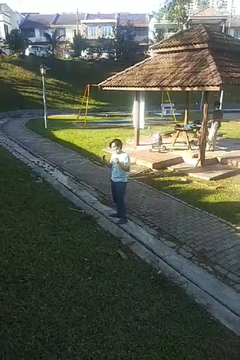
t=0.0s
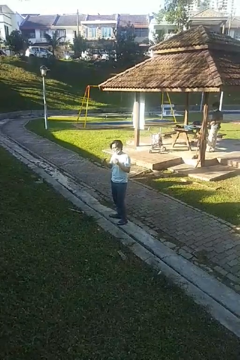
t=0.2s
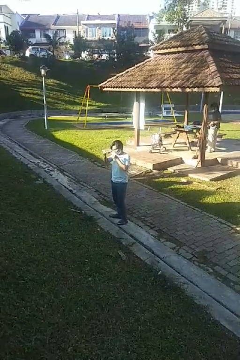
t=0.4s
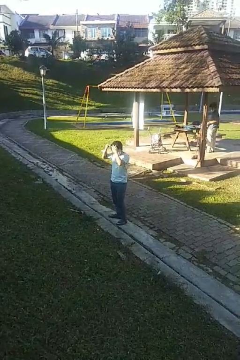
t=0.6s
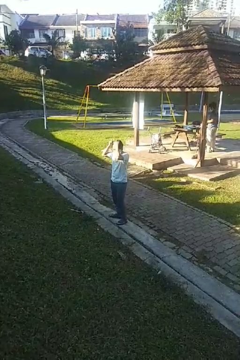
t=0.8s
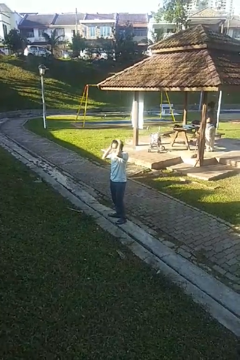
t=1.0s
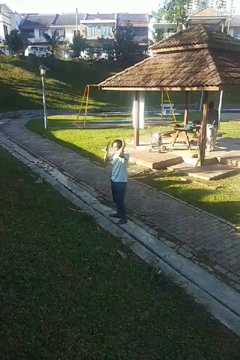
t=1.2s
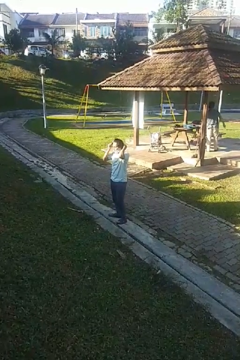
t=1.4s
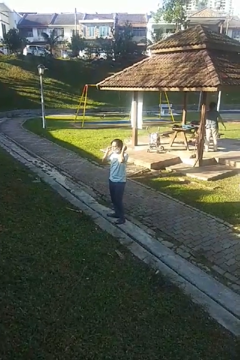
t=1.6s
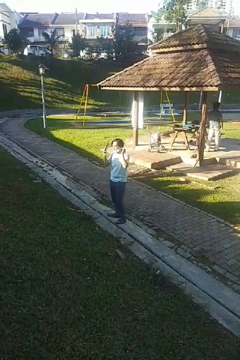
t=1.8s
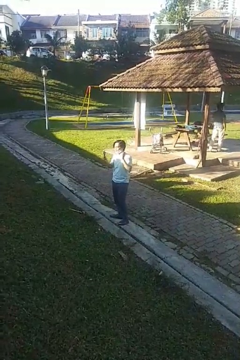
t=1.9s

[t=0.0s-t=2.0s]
person brushes hair

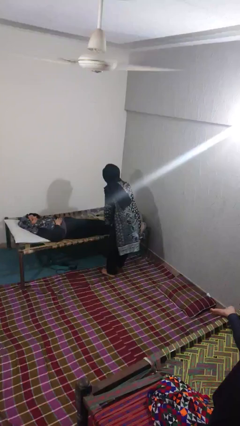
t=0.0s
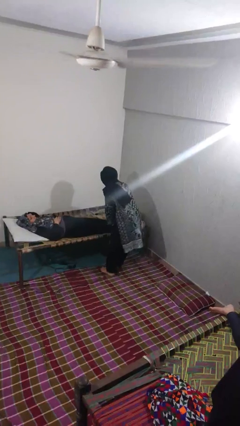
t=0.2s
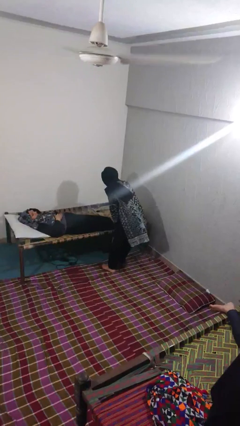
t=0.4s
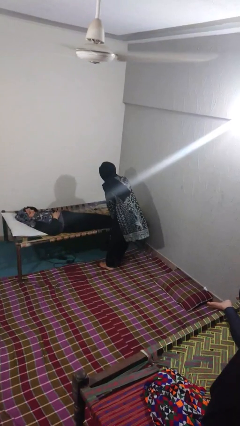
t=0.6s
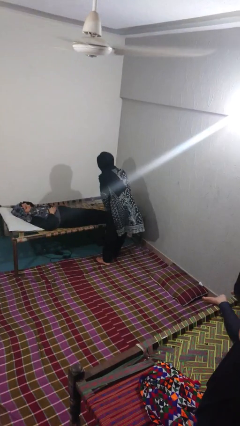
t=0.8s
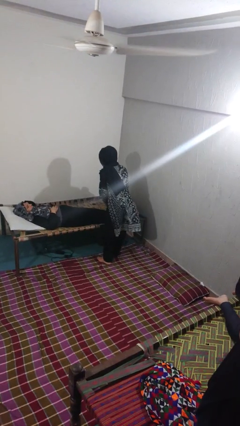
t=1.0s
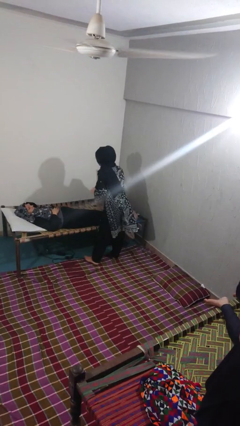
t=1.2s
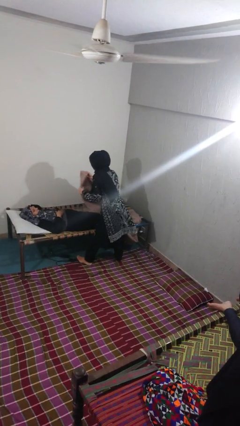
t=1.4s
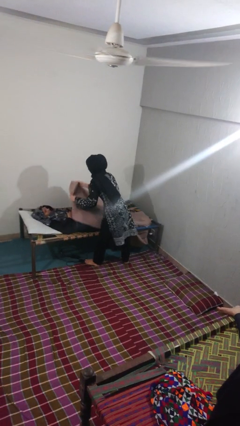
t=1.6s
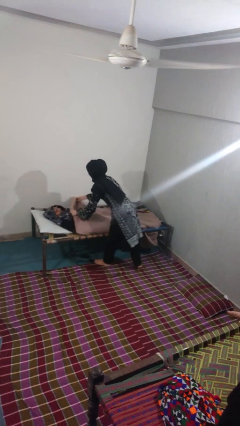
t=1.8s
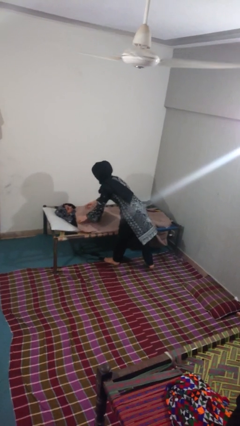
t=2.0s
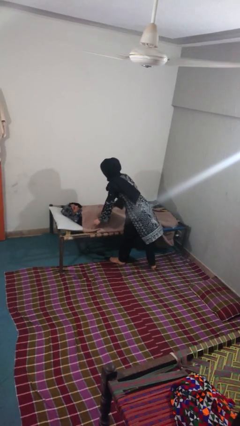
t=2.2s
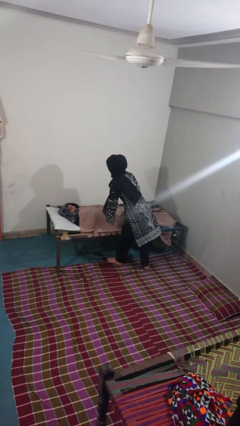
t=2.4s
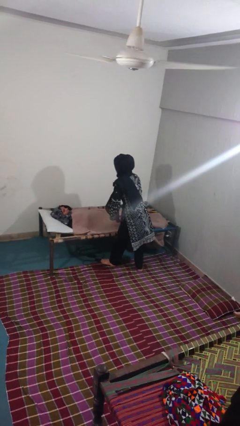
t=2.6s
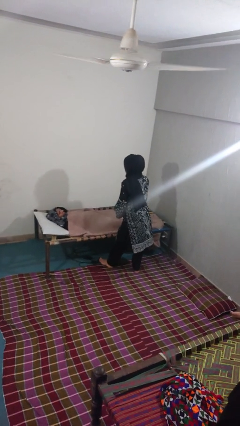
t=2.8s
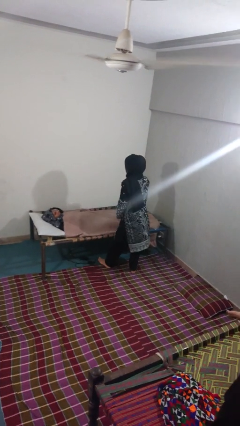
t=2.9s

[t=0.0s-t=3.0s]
person covers friend with blanket

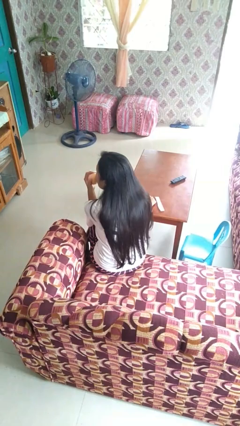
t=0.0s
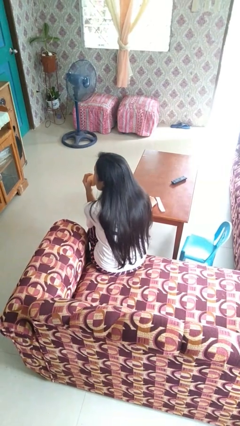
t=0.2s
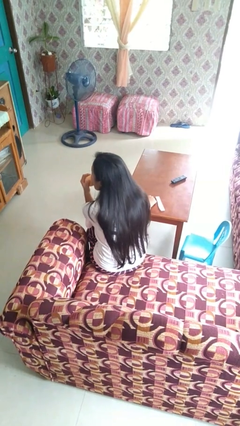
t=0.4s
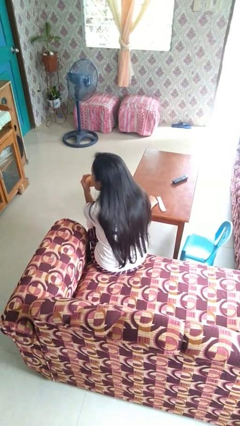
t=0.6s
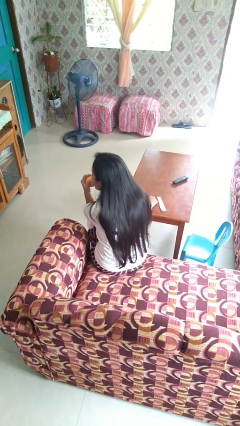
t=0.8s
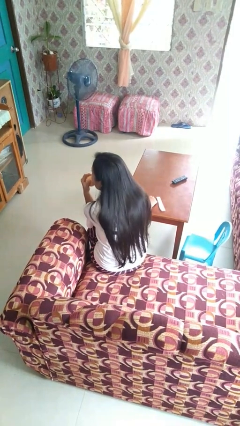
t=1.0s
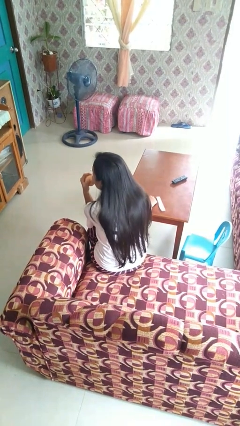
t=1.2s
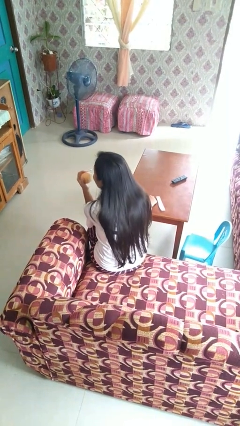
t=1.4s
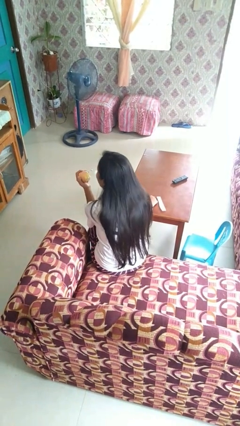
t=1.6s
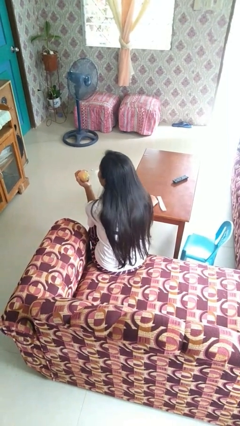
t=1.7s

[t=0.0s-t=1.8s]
person eats apple

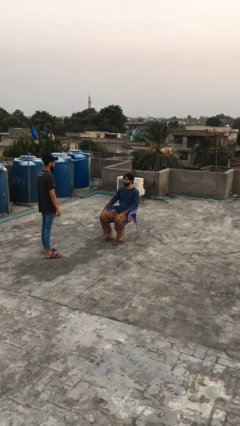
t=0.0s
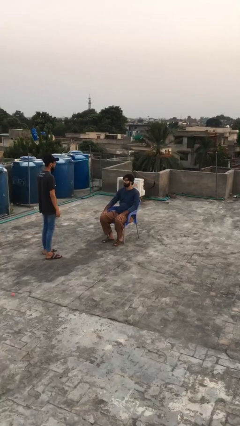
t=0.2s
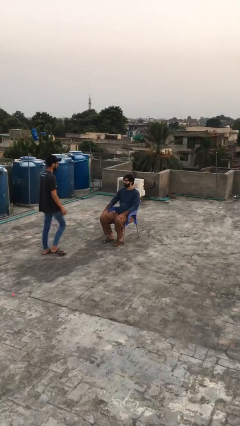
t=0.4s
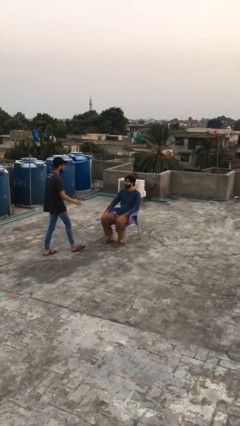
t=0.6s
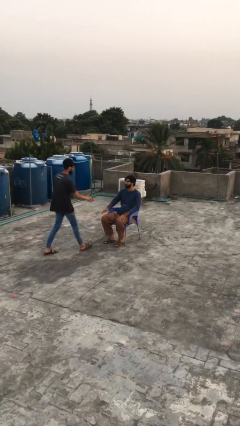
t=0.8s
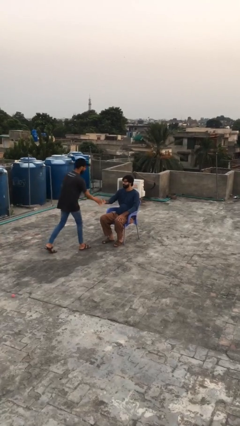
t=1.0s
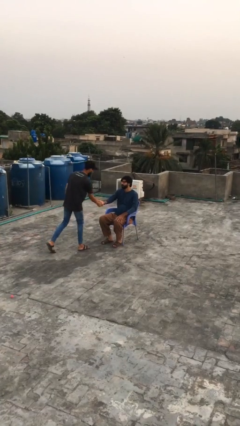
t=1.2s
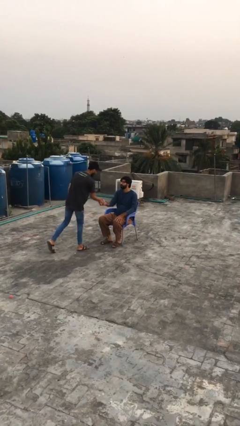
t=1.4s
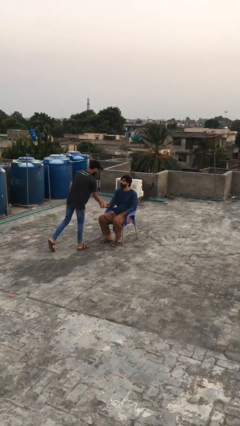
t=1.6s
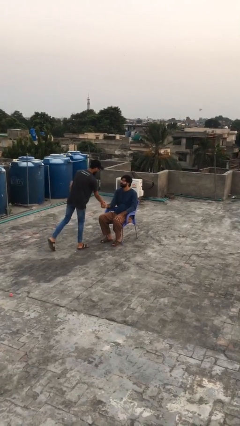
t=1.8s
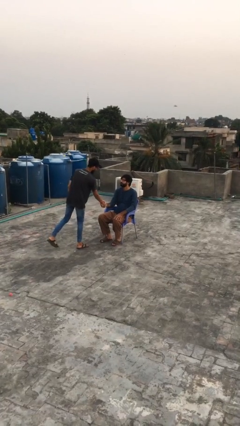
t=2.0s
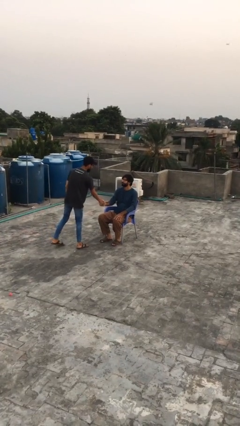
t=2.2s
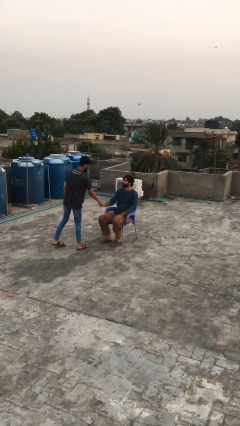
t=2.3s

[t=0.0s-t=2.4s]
person shakes hand

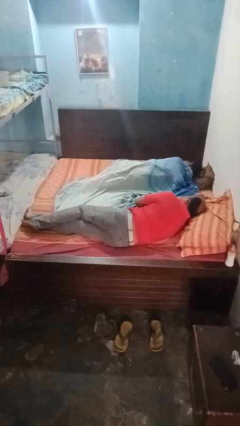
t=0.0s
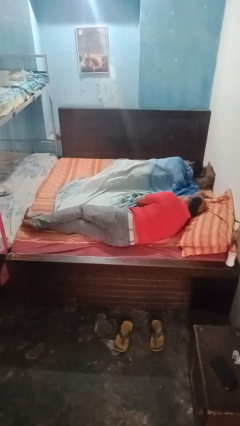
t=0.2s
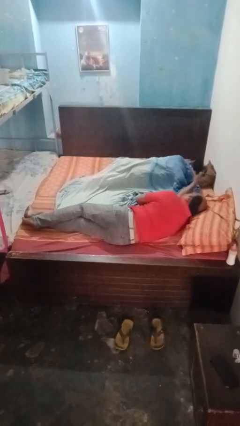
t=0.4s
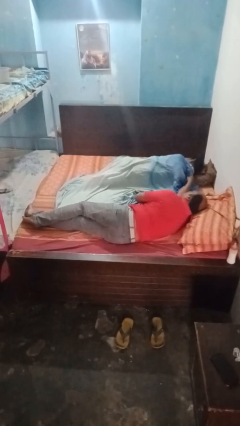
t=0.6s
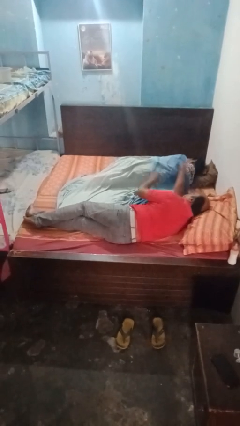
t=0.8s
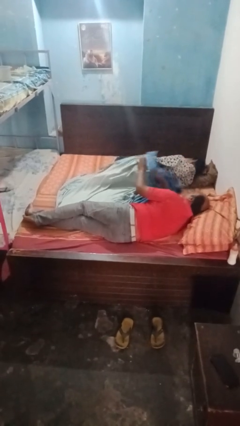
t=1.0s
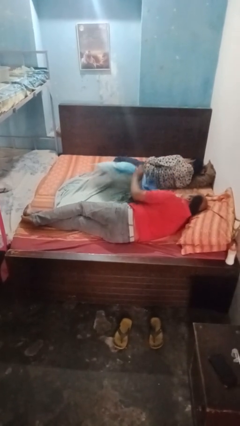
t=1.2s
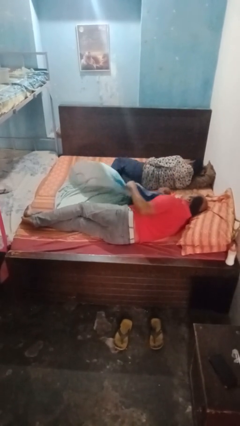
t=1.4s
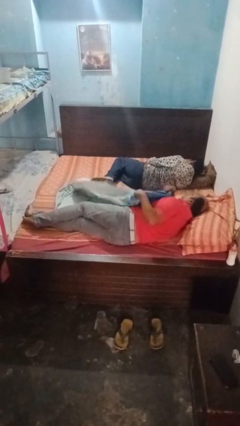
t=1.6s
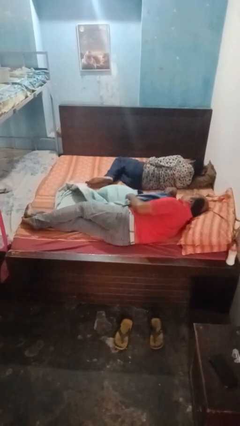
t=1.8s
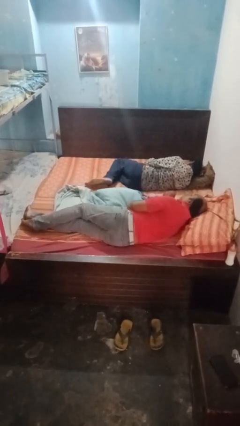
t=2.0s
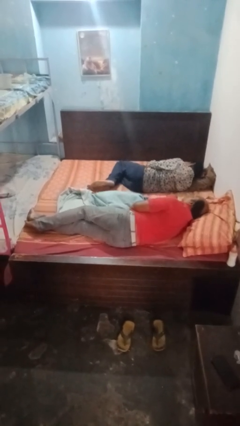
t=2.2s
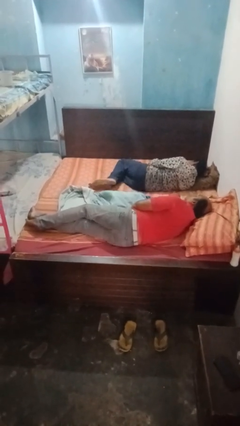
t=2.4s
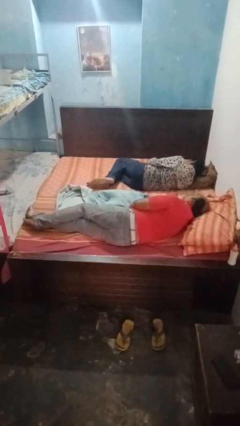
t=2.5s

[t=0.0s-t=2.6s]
person uncovers friend with blanket

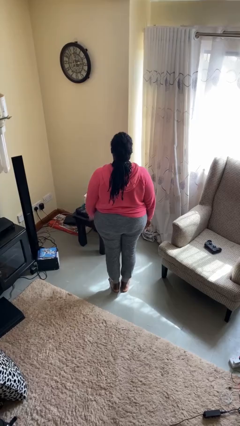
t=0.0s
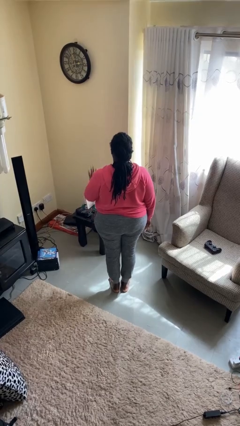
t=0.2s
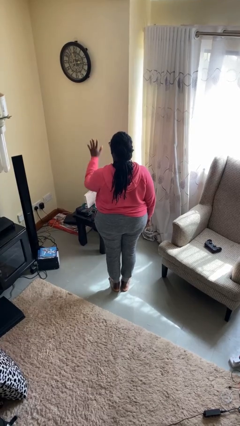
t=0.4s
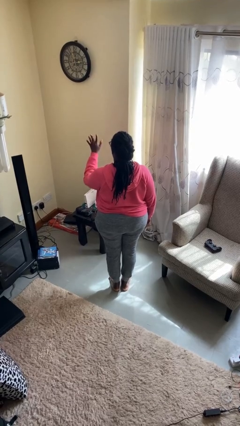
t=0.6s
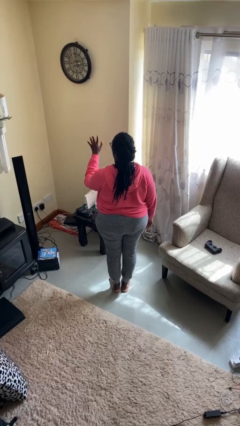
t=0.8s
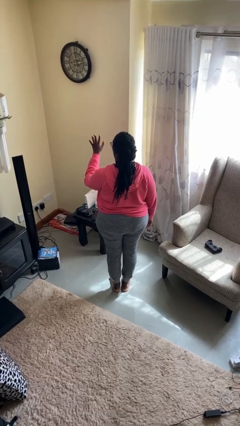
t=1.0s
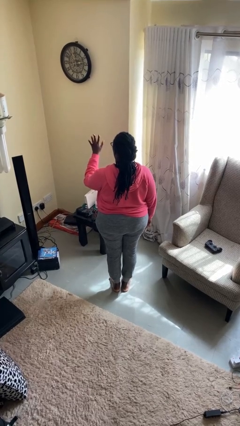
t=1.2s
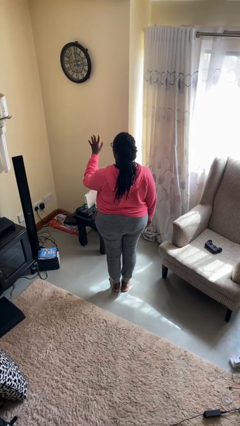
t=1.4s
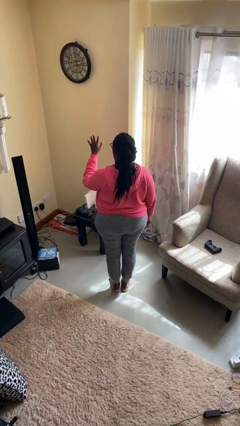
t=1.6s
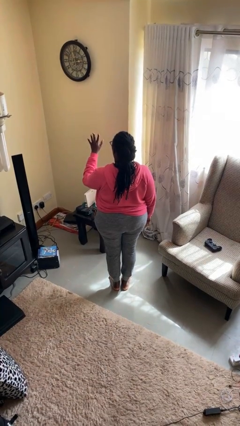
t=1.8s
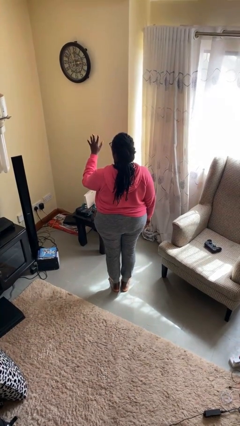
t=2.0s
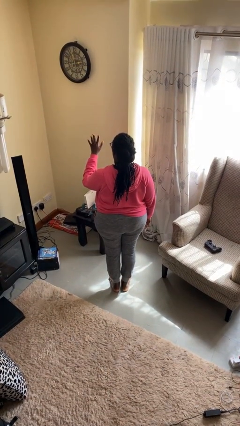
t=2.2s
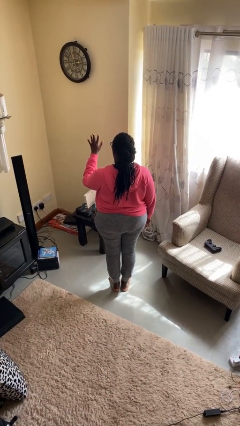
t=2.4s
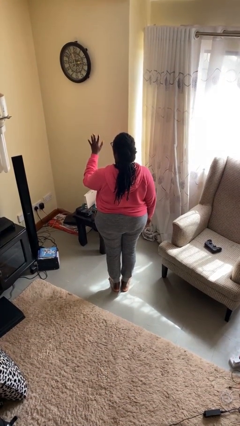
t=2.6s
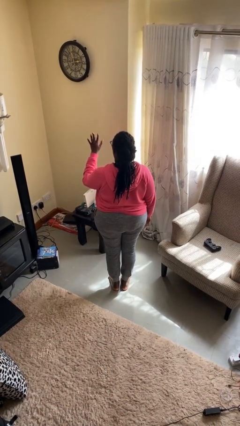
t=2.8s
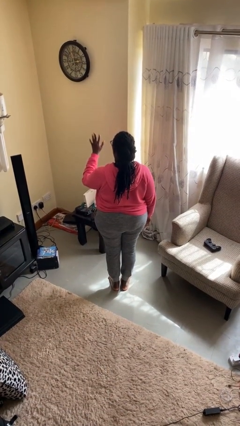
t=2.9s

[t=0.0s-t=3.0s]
person gestures number five

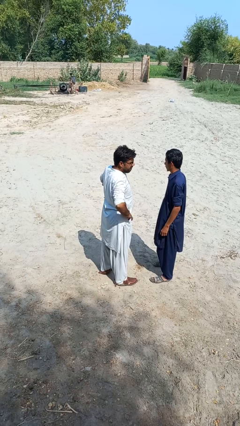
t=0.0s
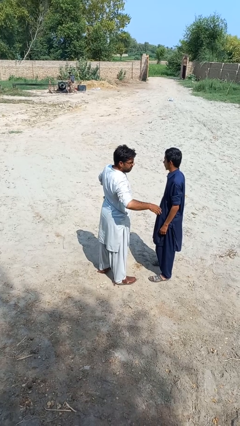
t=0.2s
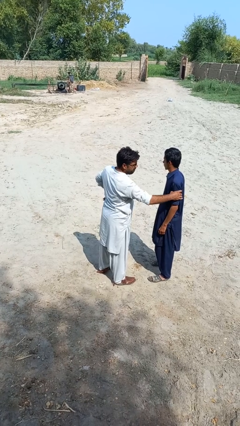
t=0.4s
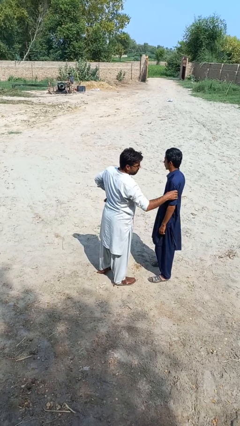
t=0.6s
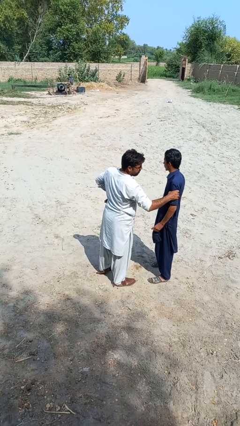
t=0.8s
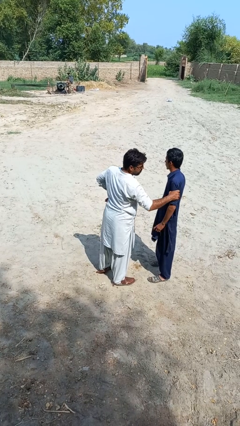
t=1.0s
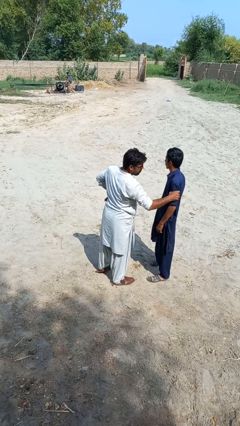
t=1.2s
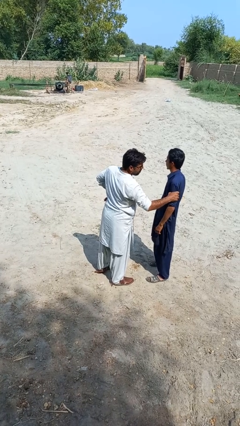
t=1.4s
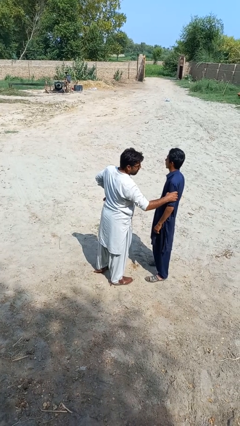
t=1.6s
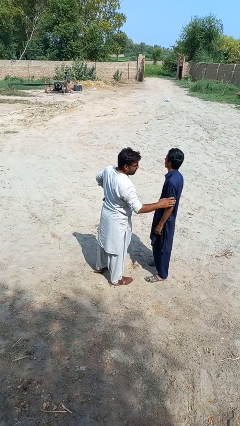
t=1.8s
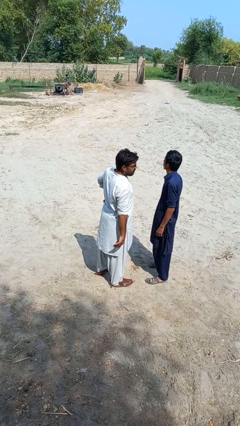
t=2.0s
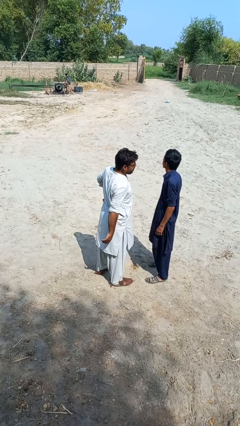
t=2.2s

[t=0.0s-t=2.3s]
person grabs person by bicep

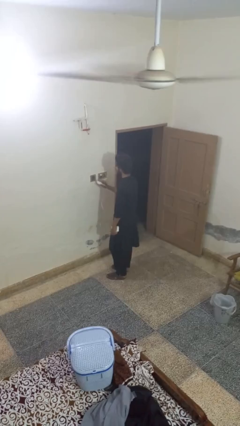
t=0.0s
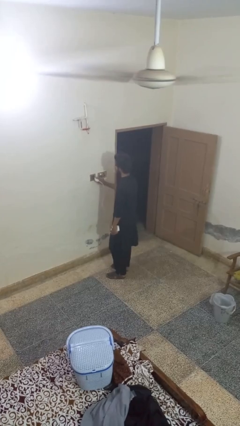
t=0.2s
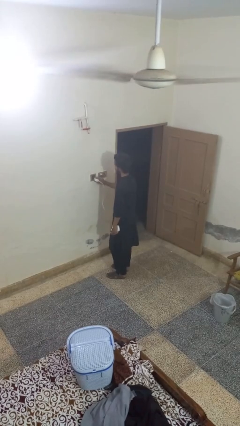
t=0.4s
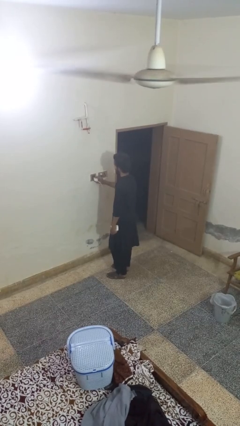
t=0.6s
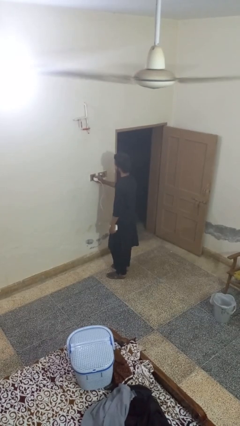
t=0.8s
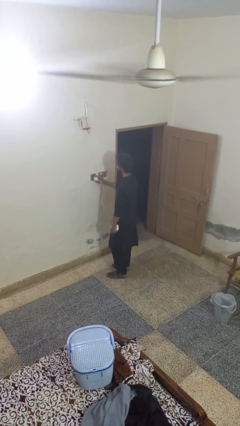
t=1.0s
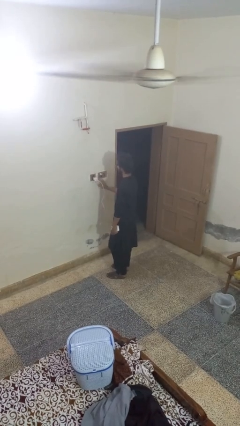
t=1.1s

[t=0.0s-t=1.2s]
person plugs into electrical socket
